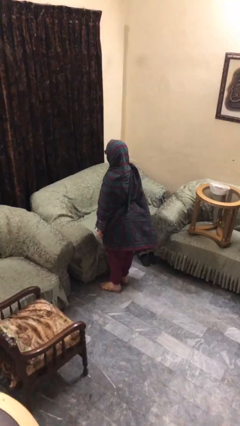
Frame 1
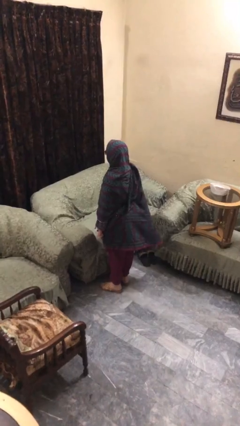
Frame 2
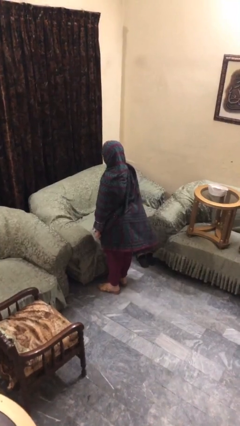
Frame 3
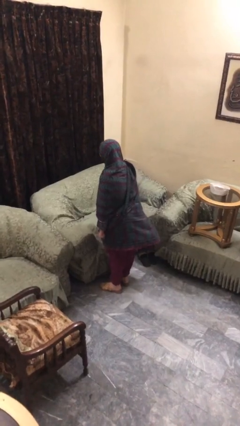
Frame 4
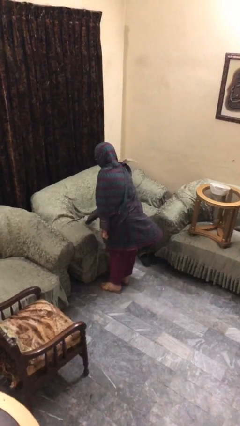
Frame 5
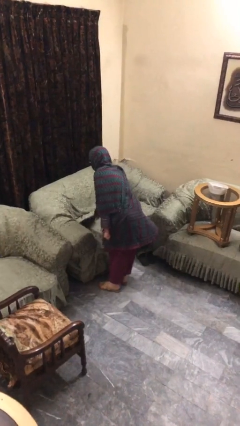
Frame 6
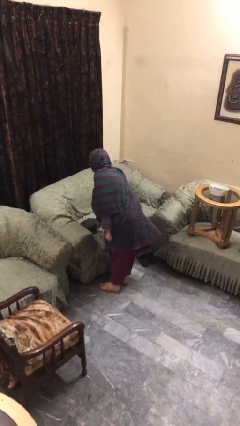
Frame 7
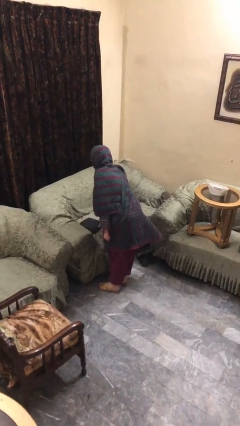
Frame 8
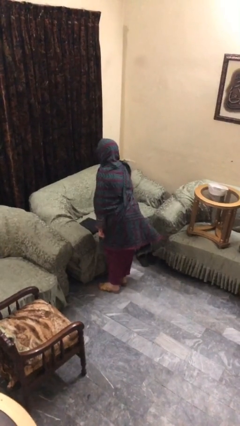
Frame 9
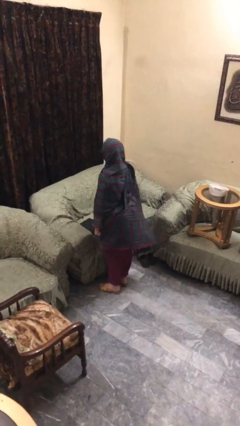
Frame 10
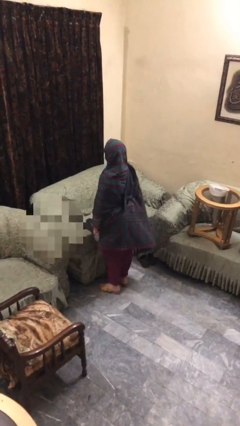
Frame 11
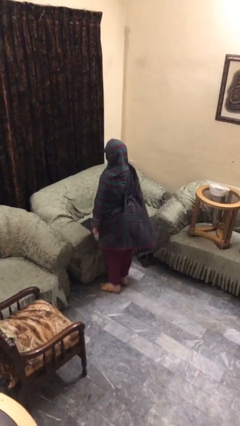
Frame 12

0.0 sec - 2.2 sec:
person puts down object on couch

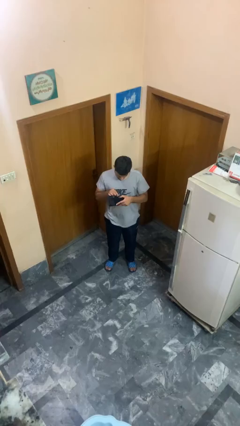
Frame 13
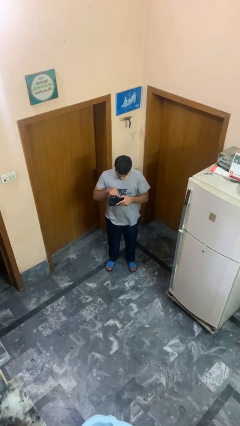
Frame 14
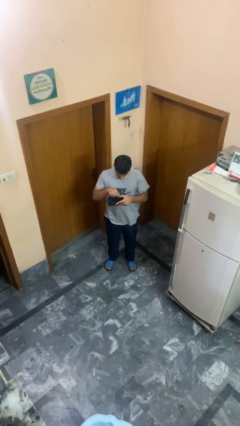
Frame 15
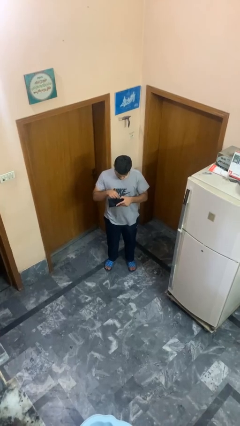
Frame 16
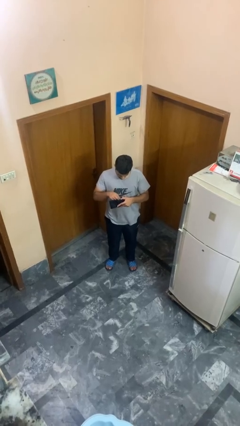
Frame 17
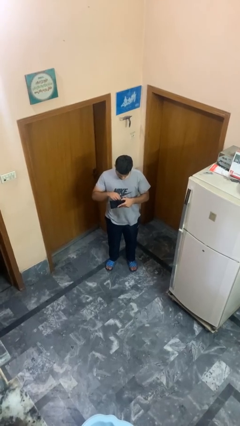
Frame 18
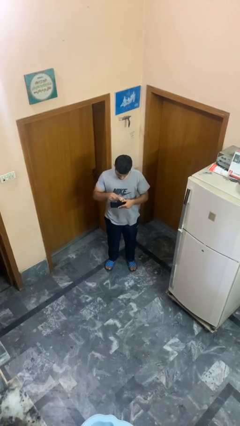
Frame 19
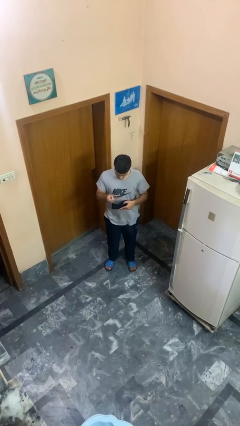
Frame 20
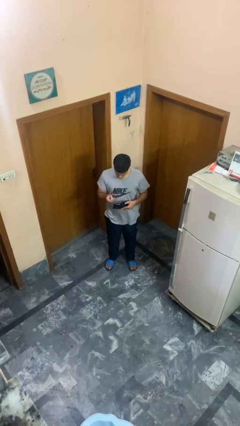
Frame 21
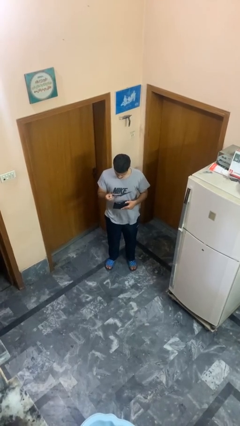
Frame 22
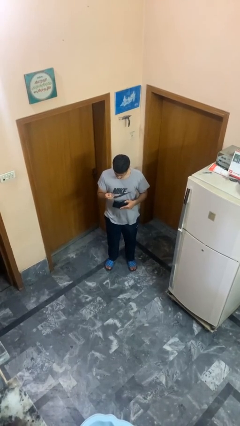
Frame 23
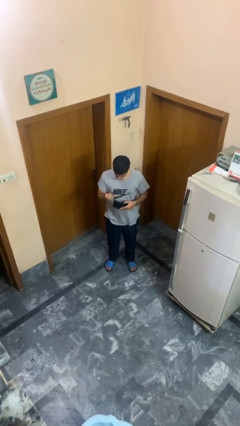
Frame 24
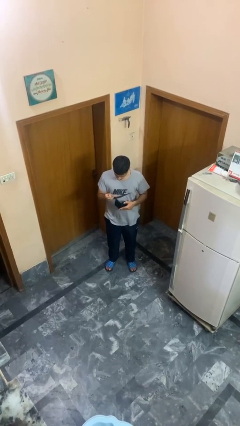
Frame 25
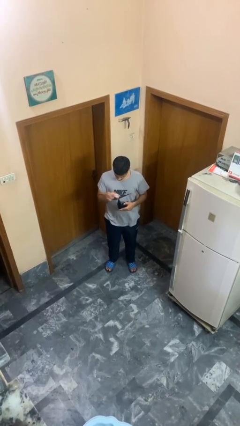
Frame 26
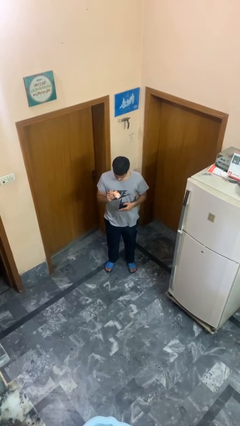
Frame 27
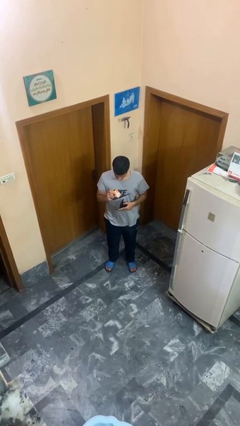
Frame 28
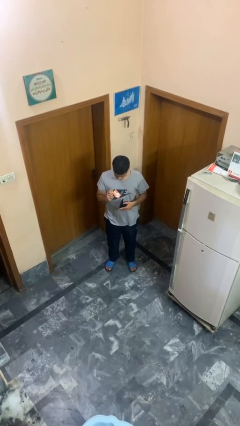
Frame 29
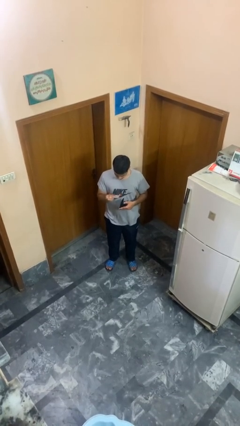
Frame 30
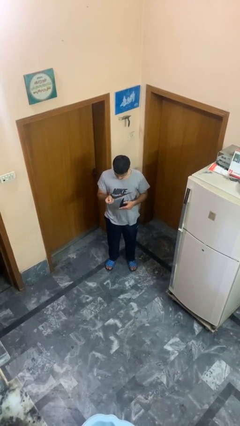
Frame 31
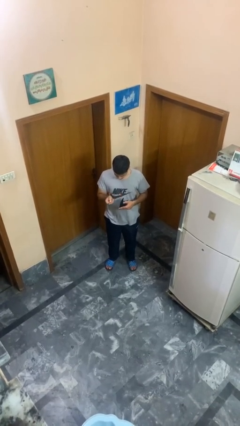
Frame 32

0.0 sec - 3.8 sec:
person takes object from purse

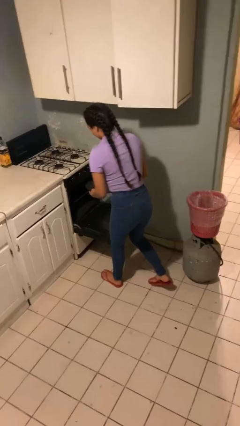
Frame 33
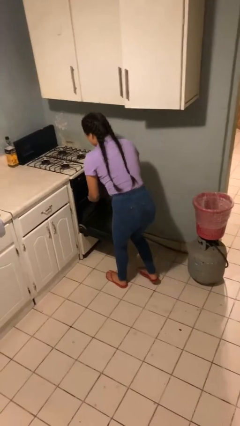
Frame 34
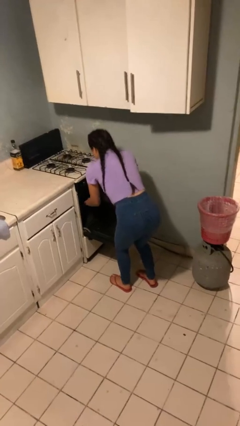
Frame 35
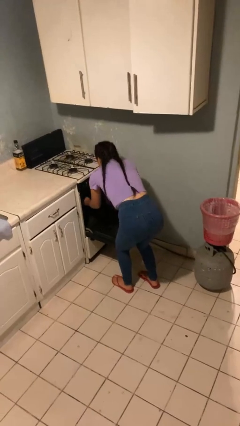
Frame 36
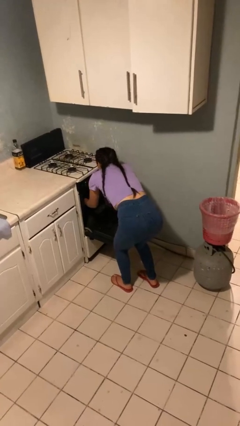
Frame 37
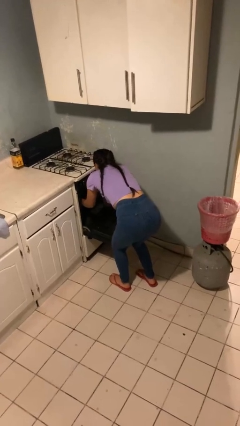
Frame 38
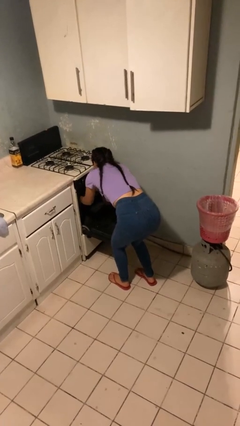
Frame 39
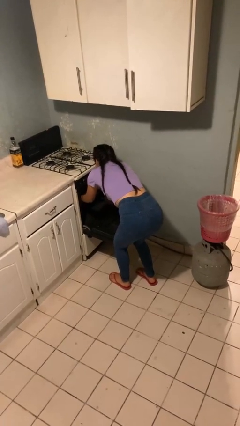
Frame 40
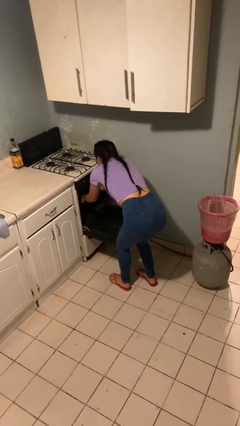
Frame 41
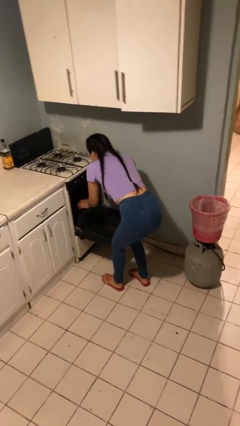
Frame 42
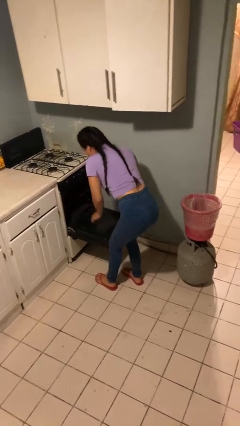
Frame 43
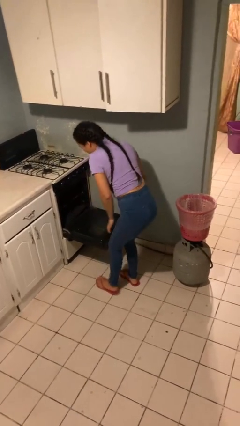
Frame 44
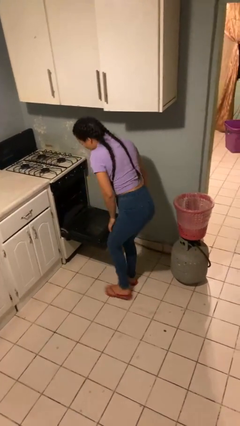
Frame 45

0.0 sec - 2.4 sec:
person puts object into toaster

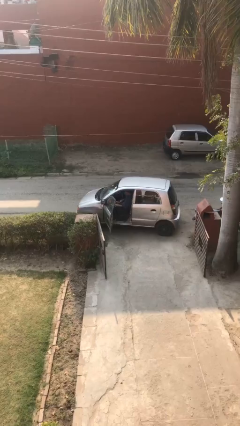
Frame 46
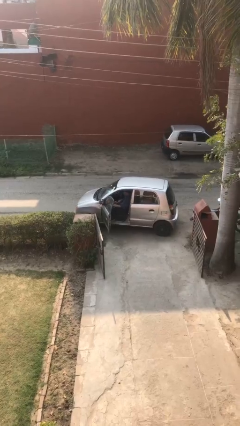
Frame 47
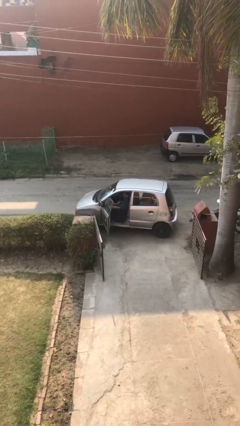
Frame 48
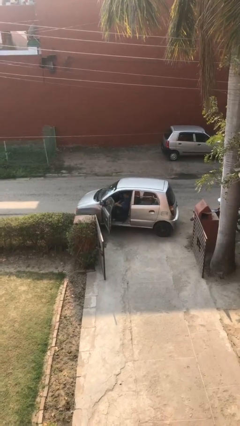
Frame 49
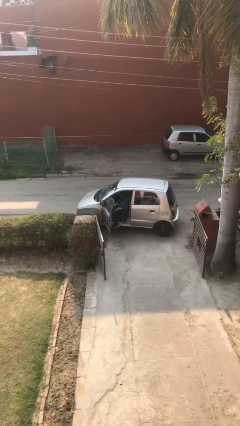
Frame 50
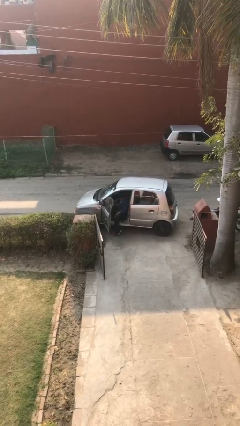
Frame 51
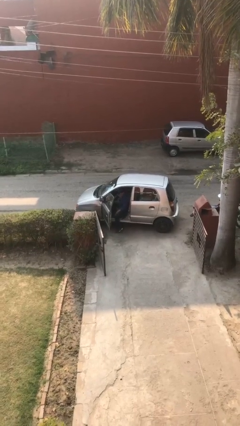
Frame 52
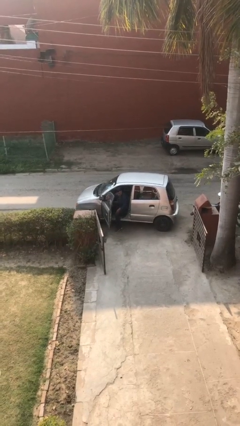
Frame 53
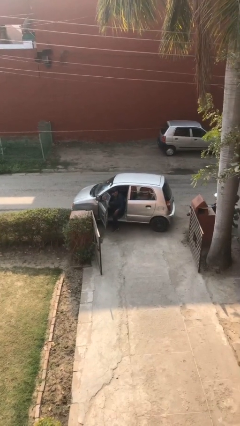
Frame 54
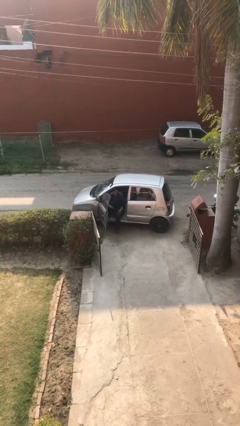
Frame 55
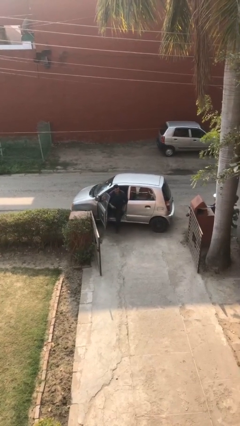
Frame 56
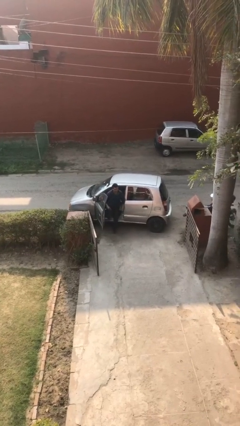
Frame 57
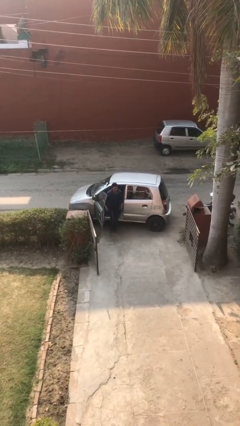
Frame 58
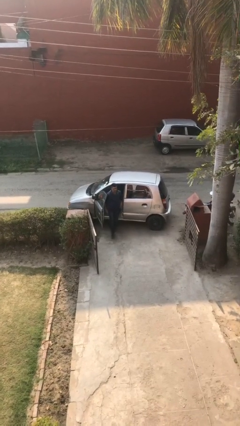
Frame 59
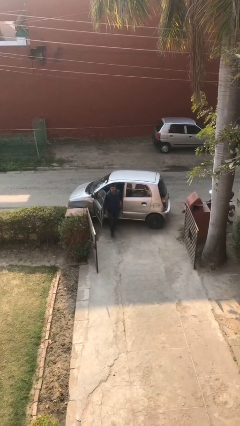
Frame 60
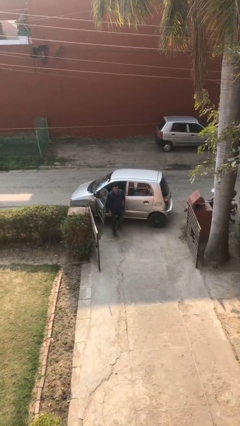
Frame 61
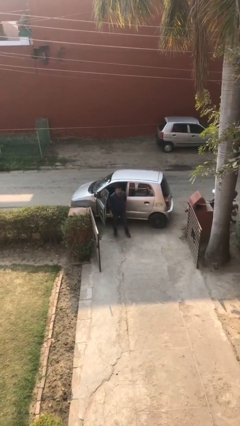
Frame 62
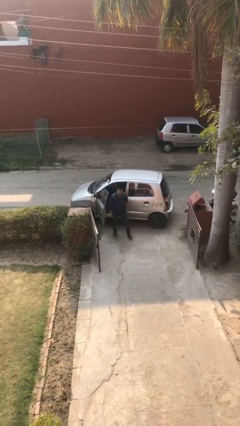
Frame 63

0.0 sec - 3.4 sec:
person exits car

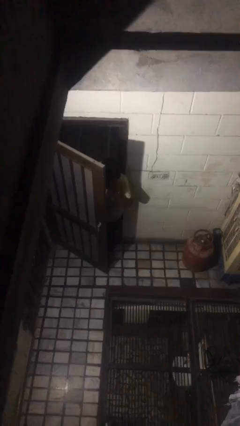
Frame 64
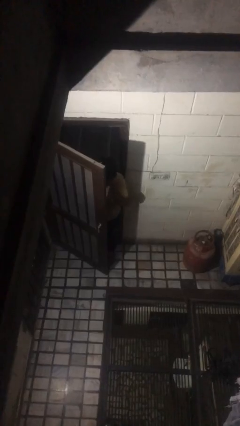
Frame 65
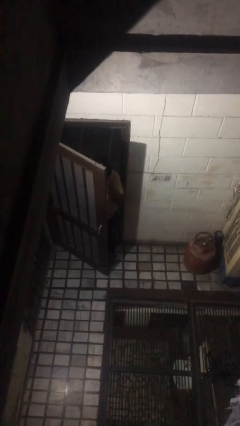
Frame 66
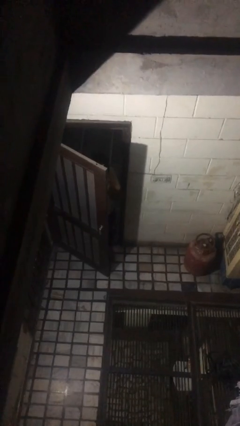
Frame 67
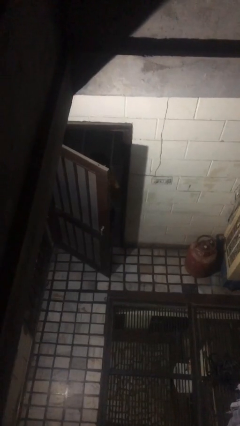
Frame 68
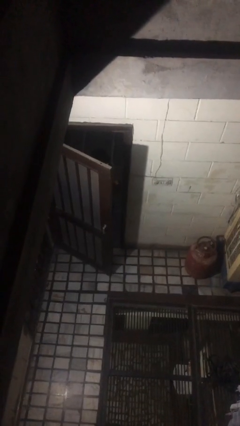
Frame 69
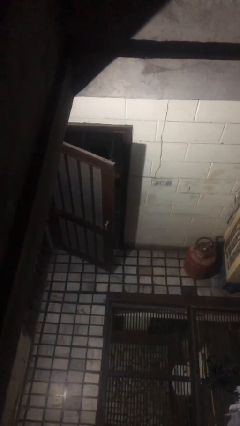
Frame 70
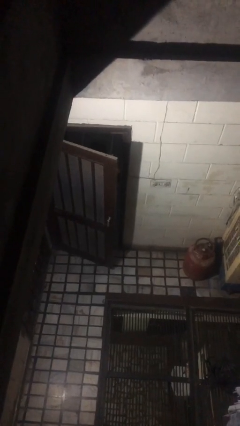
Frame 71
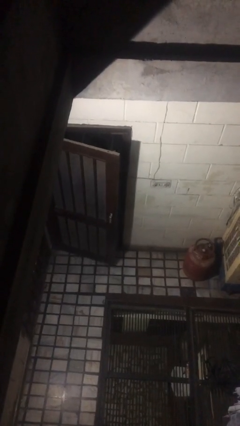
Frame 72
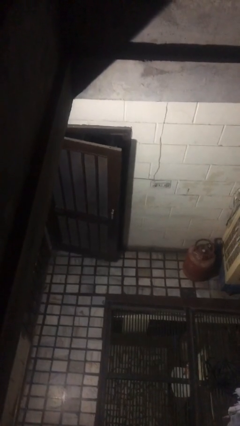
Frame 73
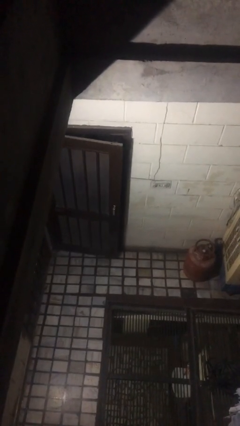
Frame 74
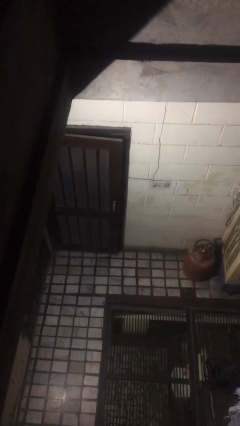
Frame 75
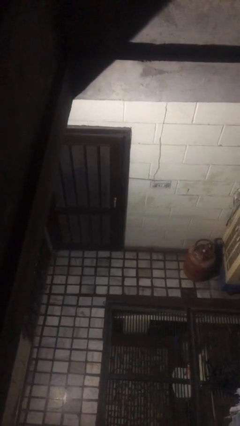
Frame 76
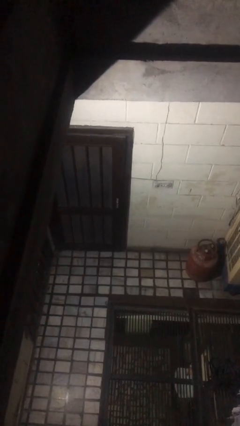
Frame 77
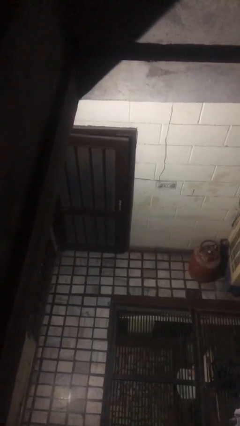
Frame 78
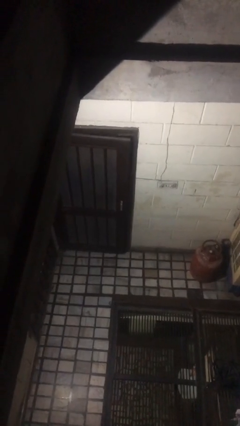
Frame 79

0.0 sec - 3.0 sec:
person closes facility door

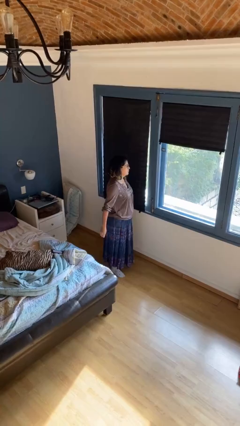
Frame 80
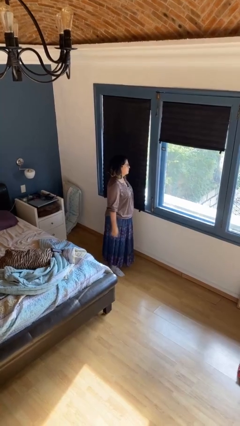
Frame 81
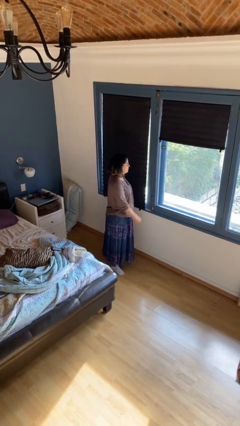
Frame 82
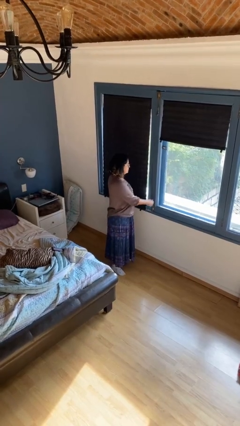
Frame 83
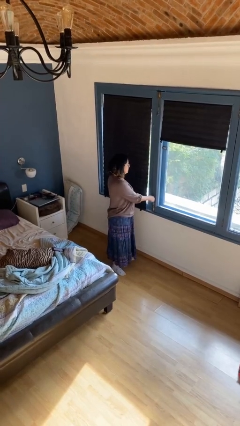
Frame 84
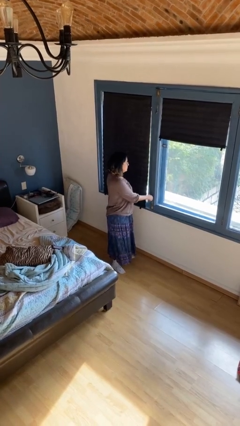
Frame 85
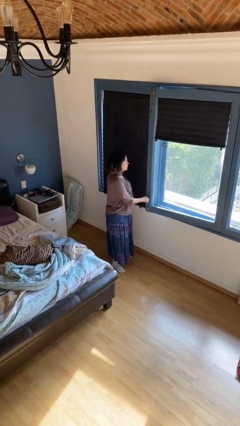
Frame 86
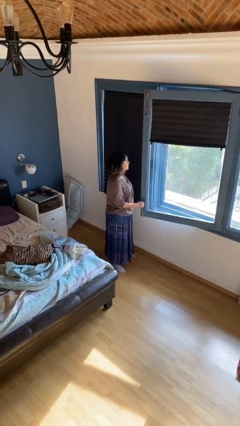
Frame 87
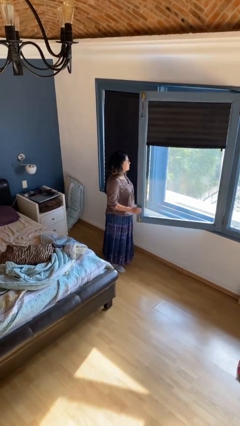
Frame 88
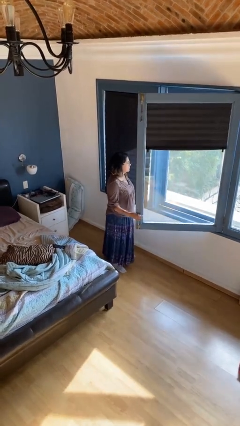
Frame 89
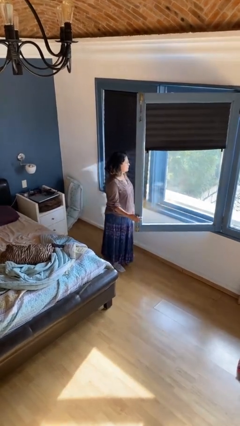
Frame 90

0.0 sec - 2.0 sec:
person opens home window

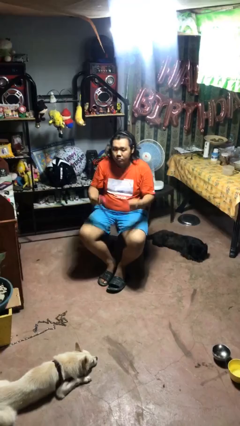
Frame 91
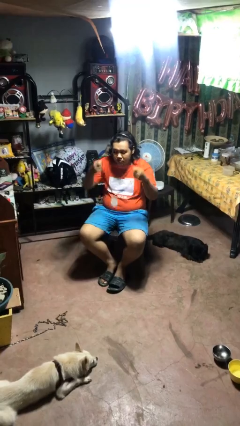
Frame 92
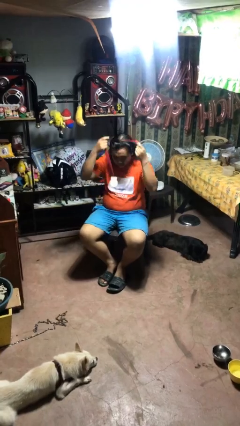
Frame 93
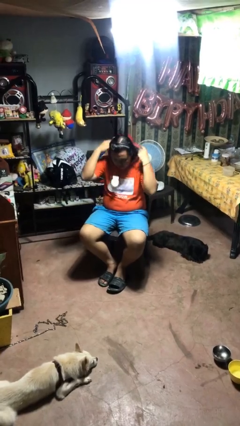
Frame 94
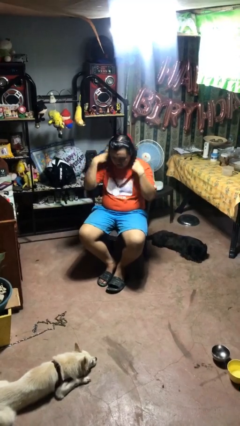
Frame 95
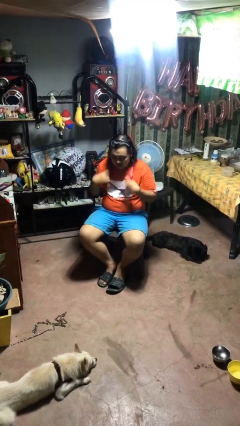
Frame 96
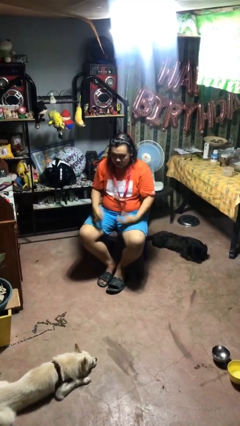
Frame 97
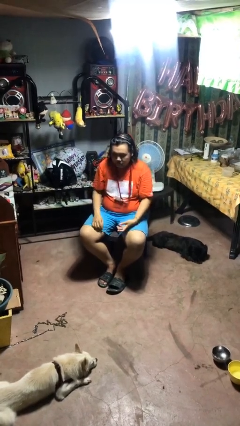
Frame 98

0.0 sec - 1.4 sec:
person puts on necklace
